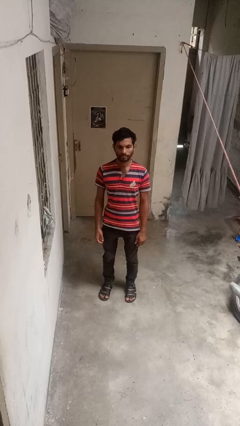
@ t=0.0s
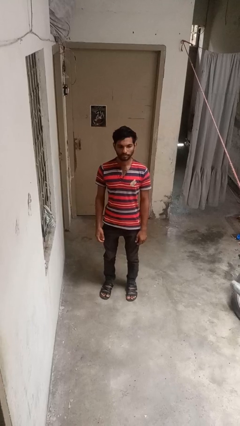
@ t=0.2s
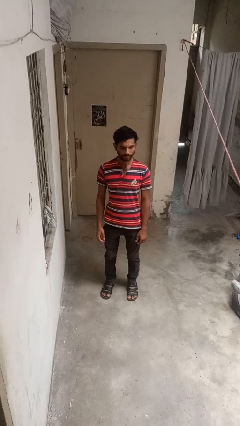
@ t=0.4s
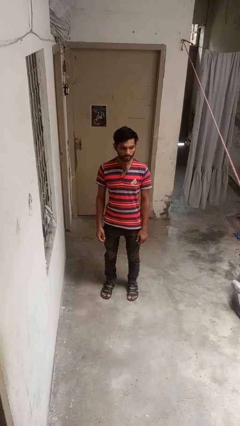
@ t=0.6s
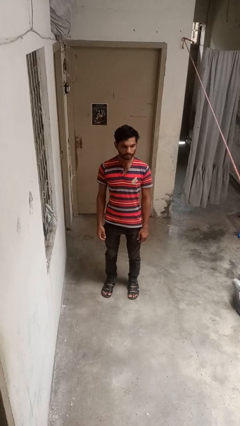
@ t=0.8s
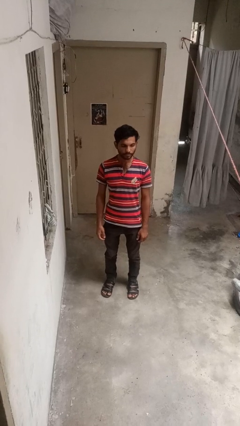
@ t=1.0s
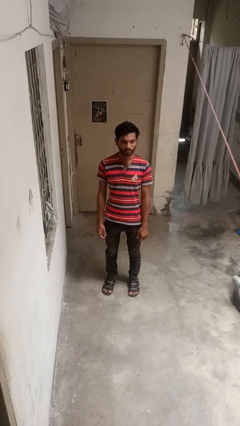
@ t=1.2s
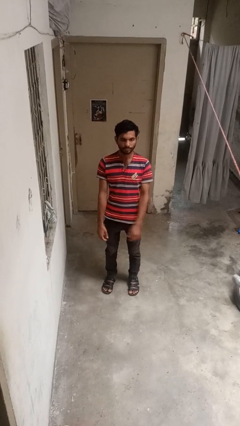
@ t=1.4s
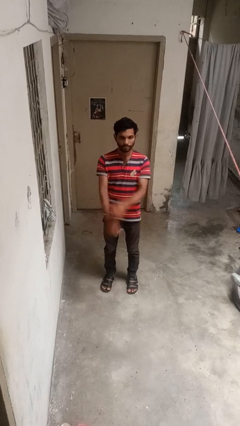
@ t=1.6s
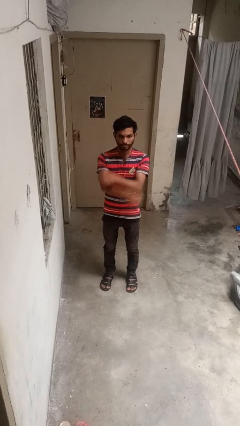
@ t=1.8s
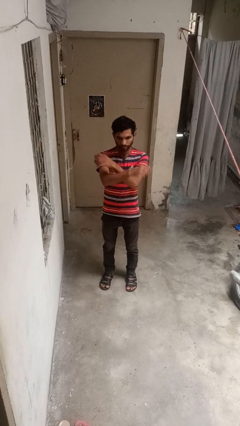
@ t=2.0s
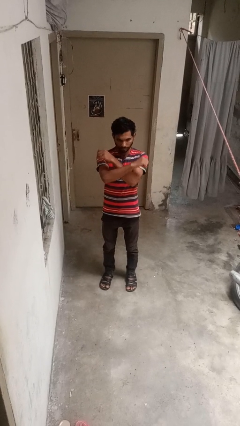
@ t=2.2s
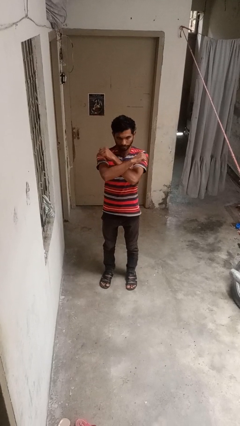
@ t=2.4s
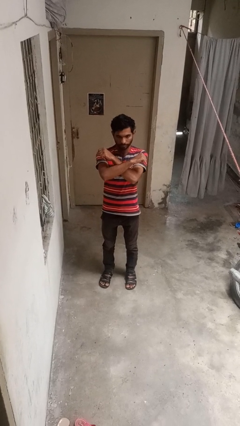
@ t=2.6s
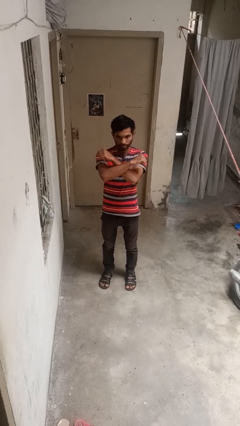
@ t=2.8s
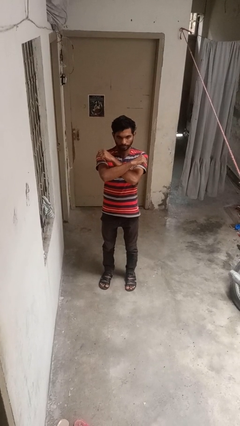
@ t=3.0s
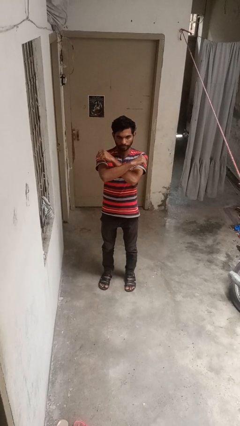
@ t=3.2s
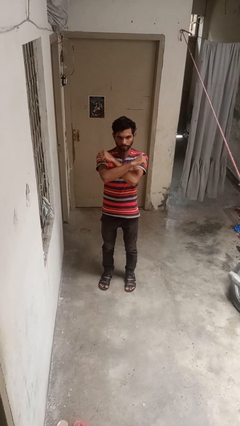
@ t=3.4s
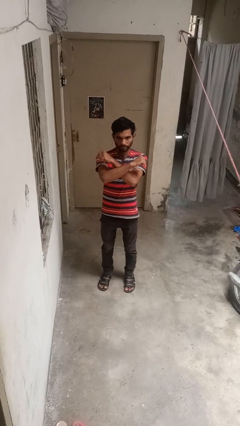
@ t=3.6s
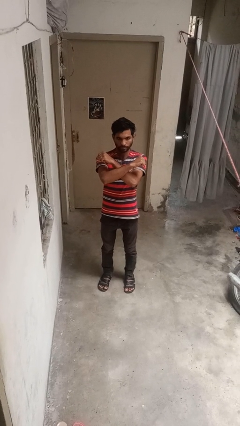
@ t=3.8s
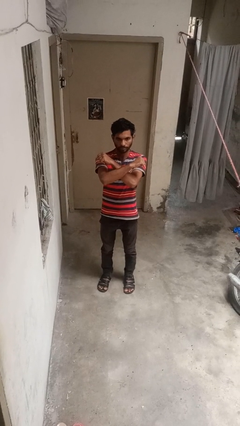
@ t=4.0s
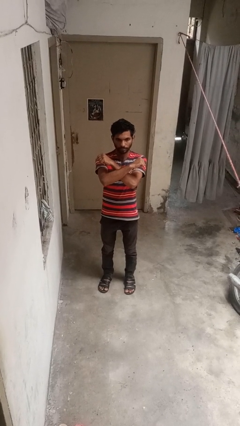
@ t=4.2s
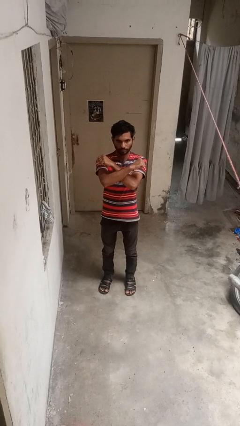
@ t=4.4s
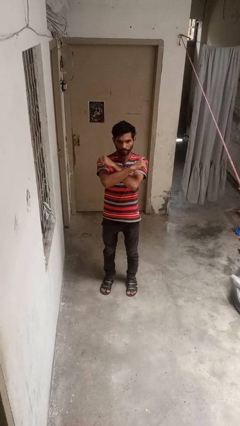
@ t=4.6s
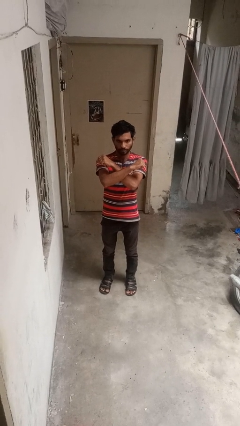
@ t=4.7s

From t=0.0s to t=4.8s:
person gestures arms x

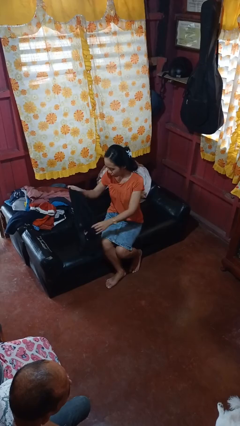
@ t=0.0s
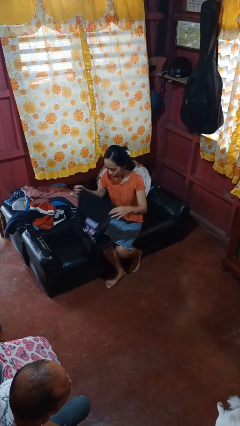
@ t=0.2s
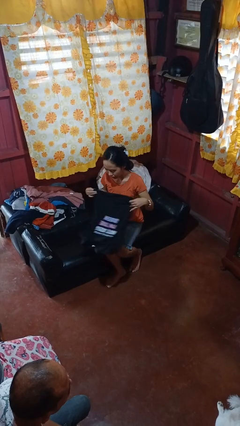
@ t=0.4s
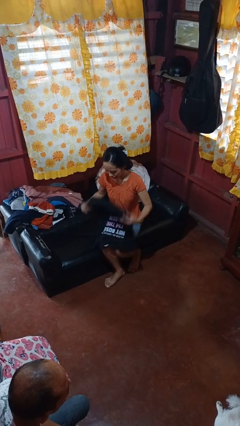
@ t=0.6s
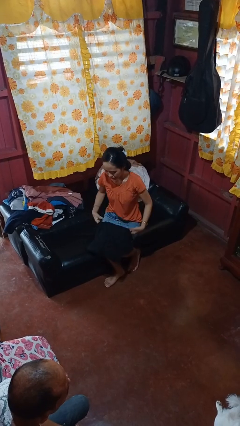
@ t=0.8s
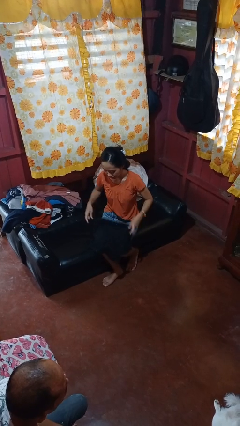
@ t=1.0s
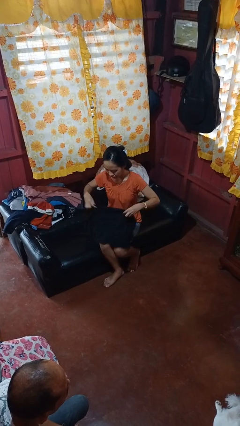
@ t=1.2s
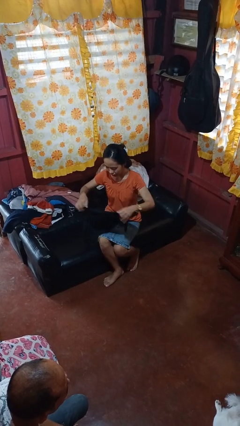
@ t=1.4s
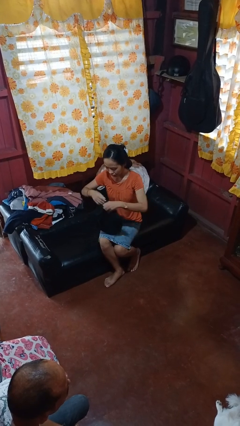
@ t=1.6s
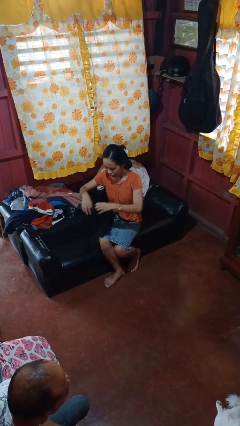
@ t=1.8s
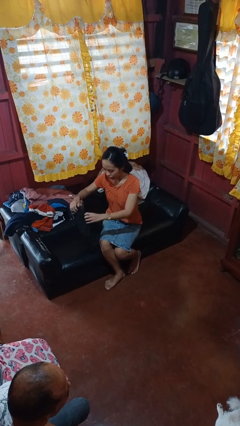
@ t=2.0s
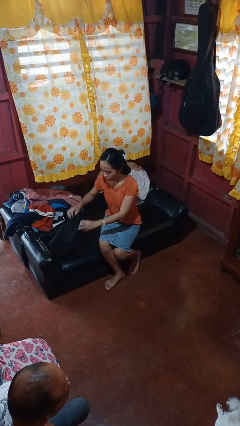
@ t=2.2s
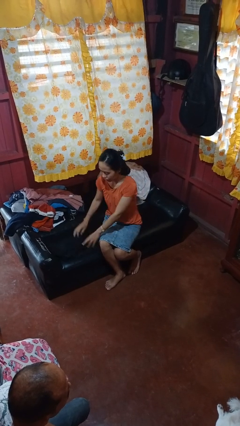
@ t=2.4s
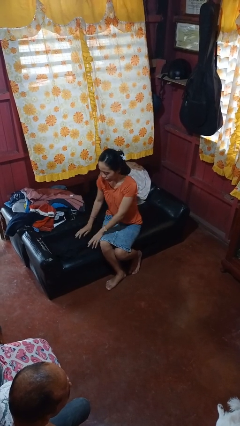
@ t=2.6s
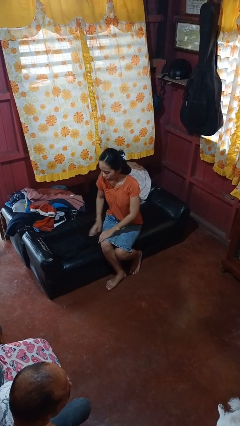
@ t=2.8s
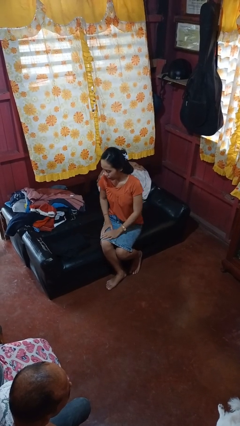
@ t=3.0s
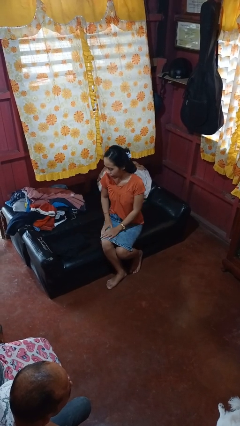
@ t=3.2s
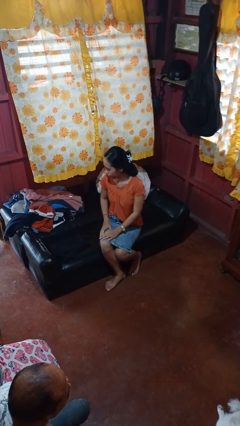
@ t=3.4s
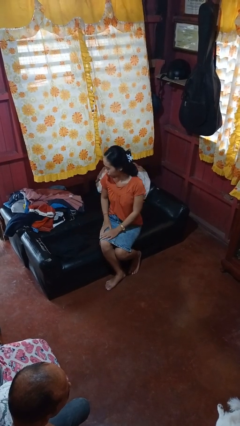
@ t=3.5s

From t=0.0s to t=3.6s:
person folds shirt

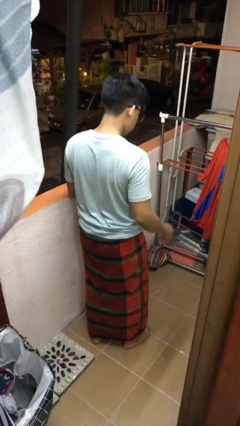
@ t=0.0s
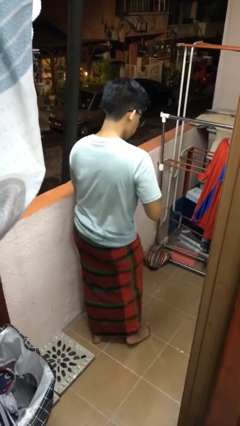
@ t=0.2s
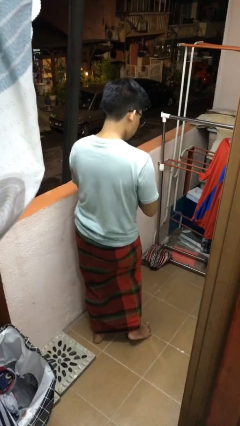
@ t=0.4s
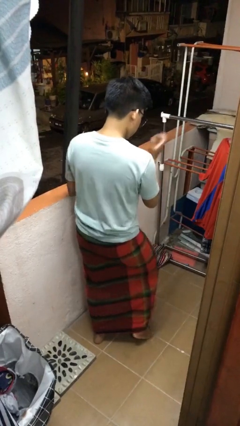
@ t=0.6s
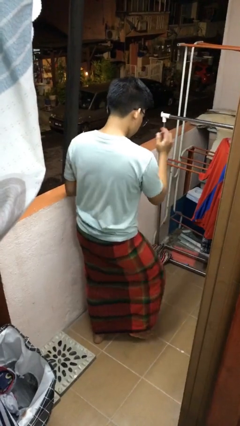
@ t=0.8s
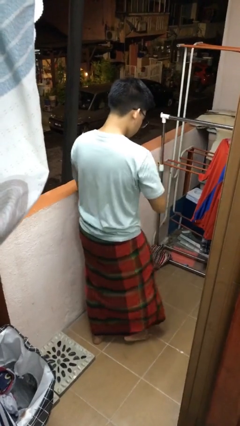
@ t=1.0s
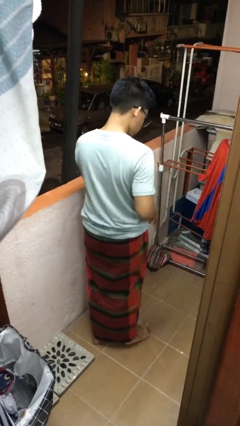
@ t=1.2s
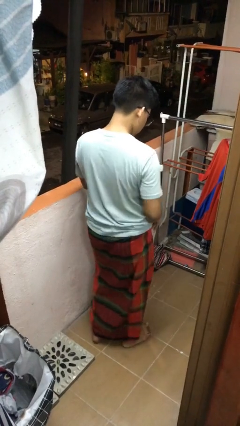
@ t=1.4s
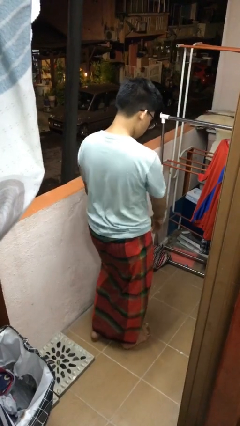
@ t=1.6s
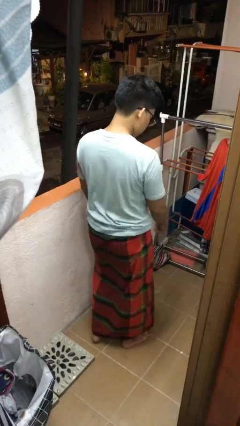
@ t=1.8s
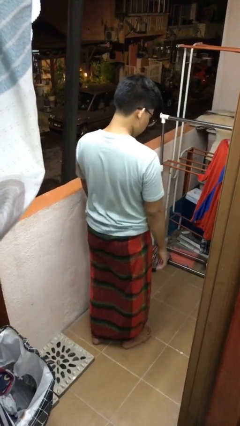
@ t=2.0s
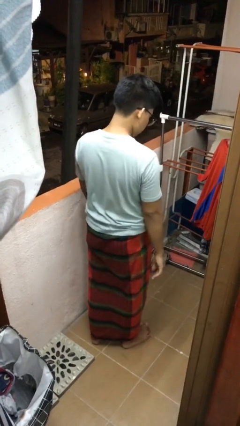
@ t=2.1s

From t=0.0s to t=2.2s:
person dances in place

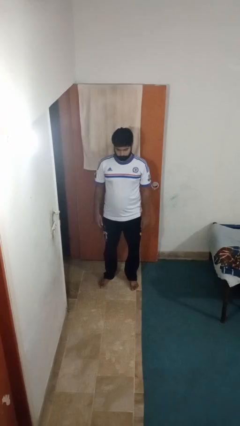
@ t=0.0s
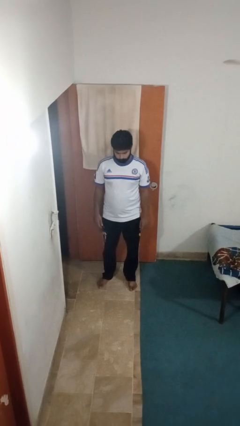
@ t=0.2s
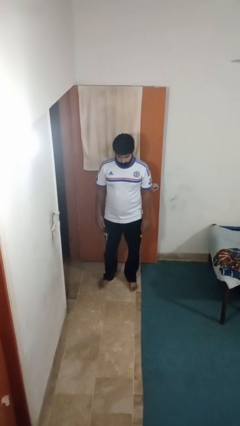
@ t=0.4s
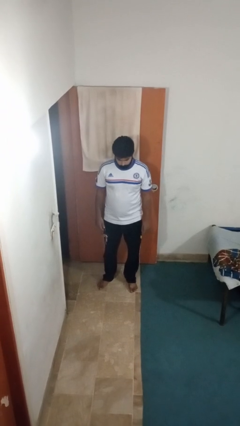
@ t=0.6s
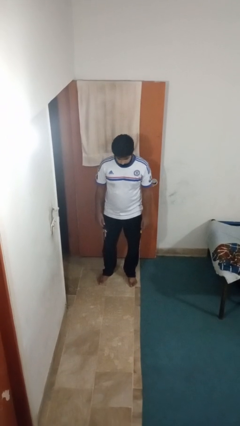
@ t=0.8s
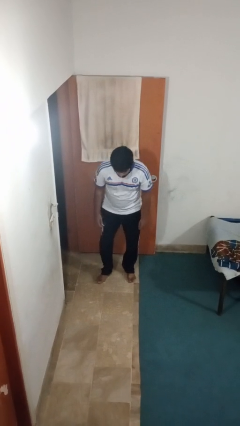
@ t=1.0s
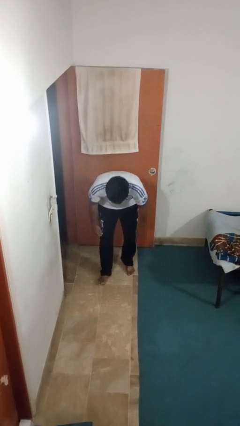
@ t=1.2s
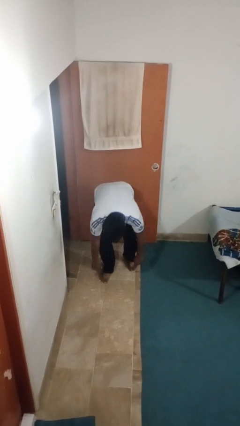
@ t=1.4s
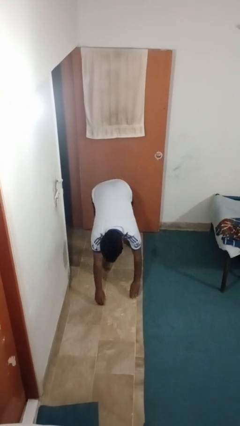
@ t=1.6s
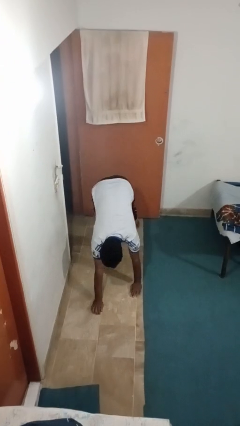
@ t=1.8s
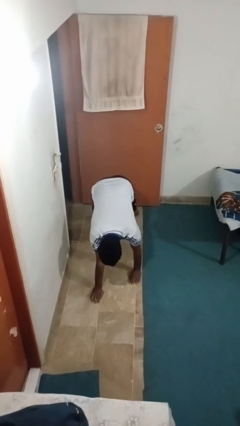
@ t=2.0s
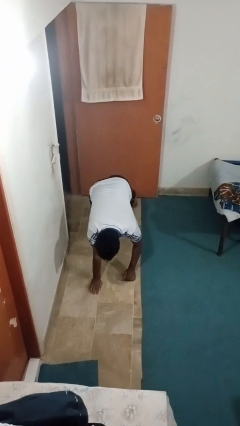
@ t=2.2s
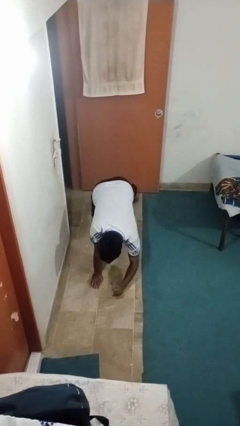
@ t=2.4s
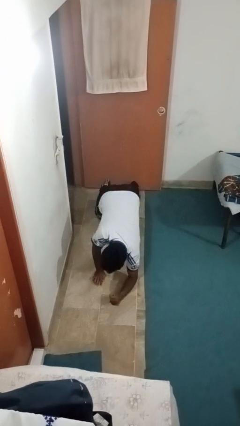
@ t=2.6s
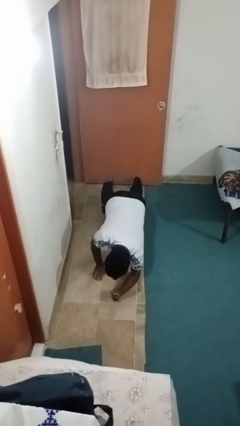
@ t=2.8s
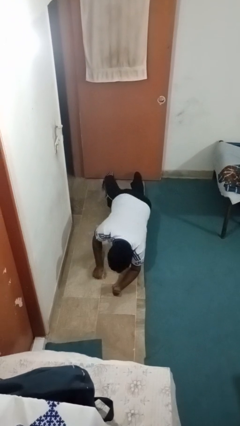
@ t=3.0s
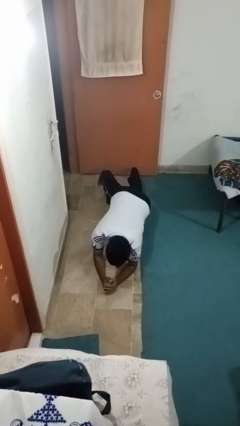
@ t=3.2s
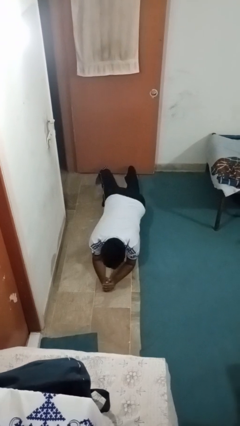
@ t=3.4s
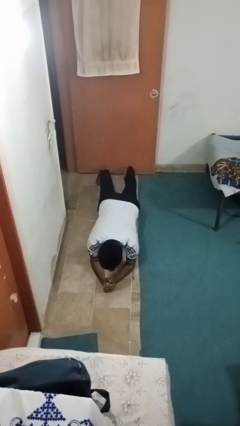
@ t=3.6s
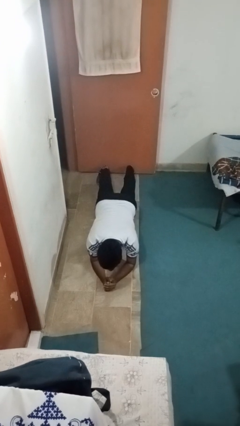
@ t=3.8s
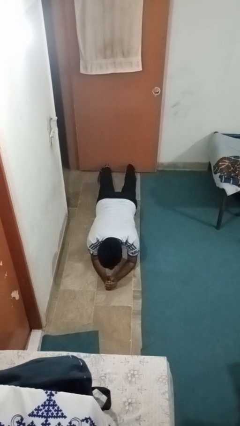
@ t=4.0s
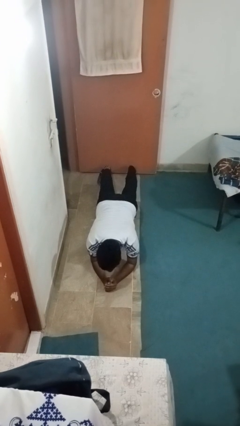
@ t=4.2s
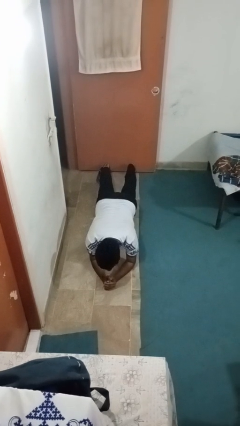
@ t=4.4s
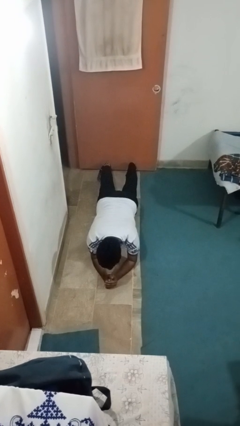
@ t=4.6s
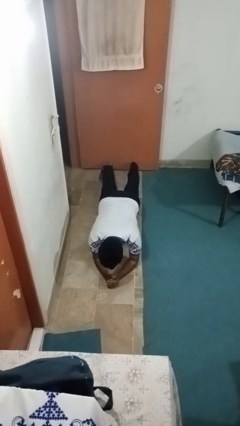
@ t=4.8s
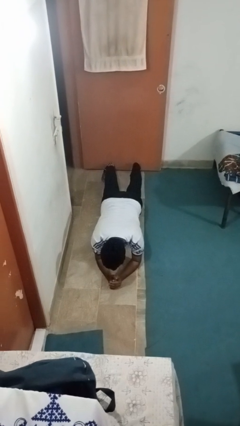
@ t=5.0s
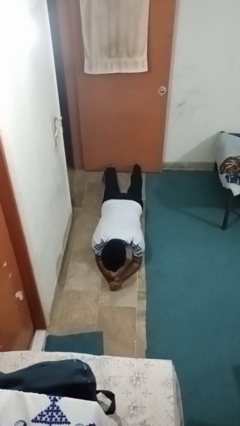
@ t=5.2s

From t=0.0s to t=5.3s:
person exercises with plank

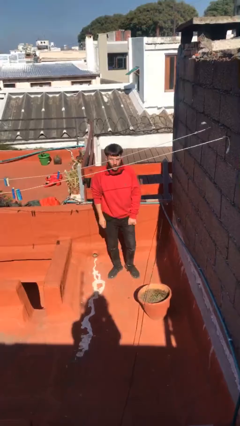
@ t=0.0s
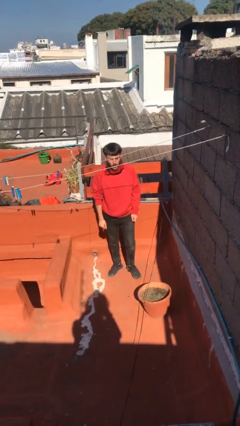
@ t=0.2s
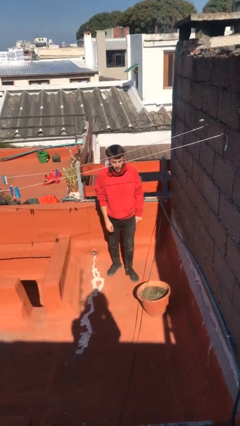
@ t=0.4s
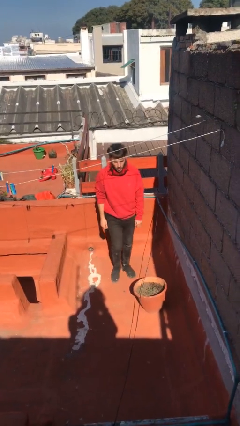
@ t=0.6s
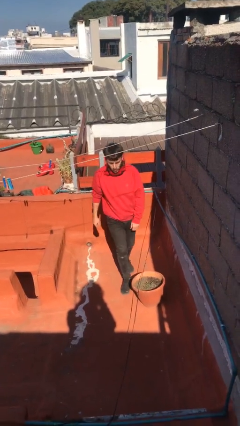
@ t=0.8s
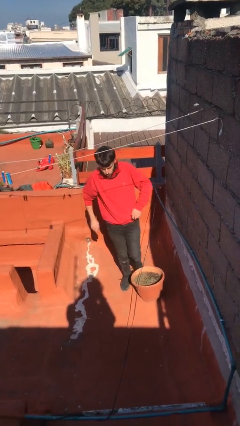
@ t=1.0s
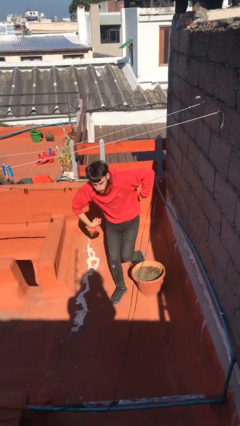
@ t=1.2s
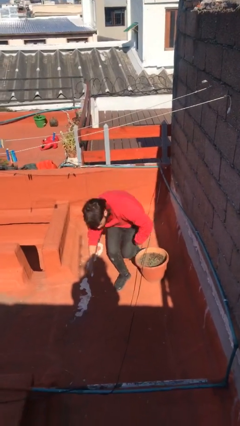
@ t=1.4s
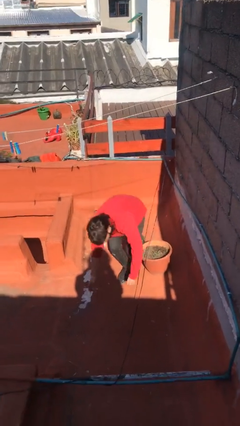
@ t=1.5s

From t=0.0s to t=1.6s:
person trips on object on floor
